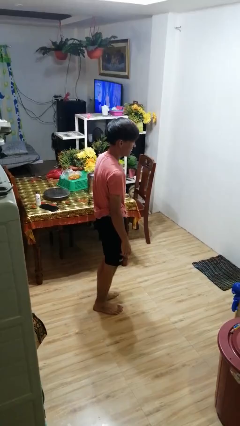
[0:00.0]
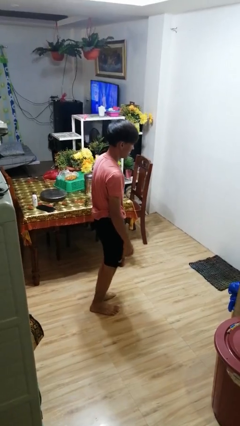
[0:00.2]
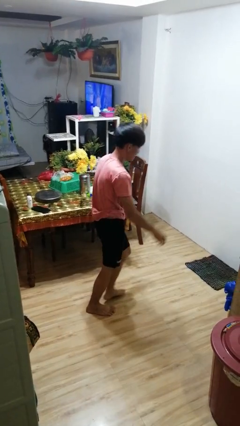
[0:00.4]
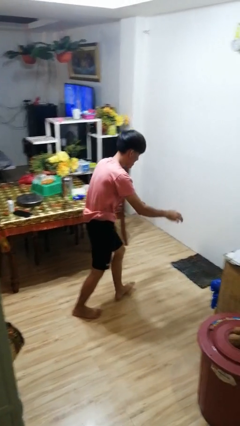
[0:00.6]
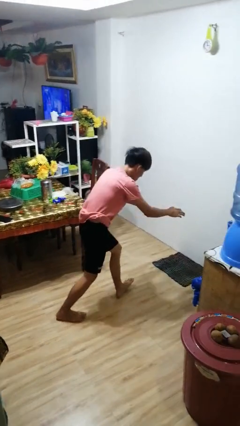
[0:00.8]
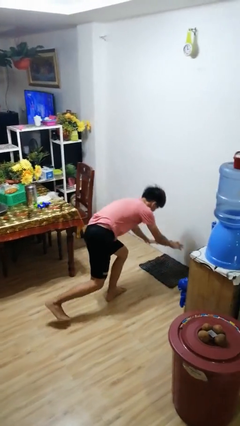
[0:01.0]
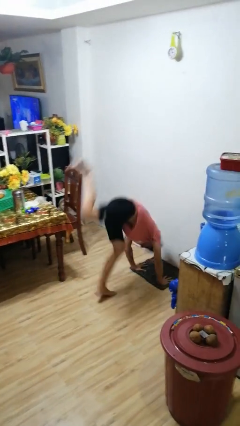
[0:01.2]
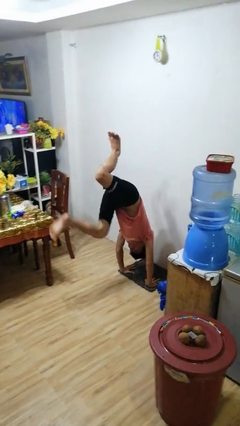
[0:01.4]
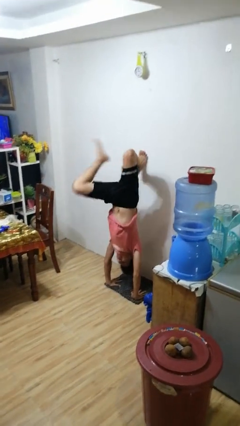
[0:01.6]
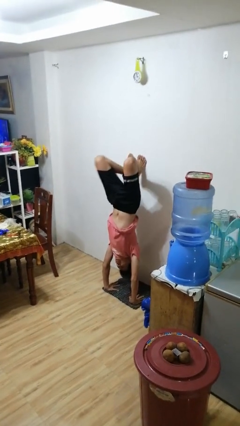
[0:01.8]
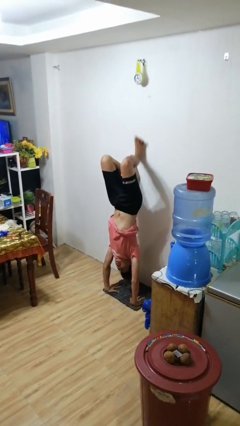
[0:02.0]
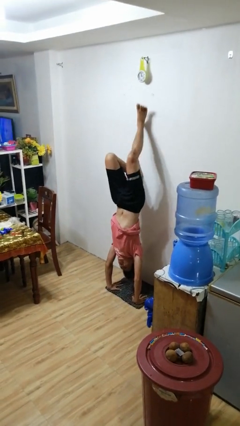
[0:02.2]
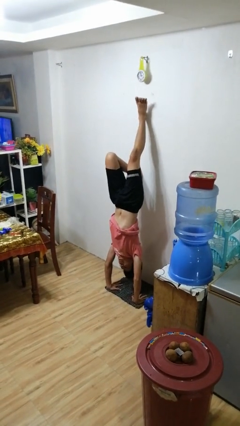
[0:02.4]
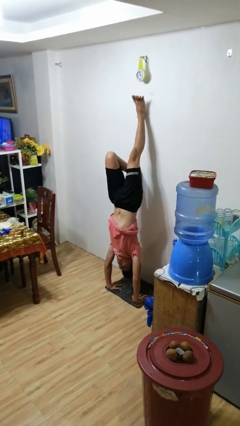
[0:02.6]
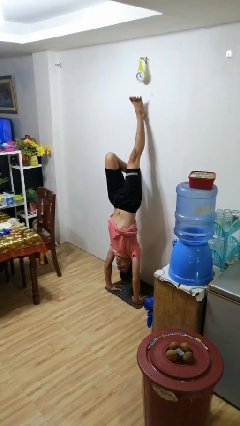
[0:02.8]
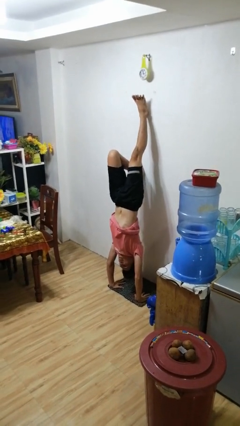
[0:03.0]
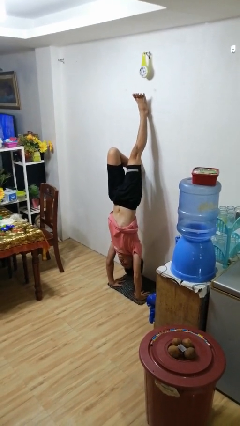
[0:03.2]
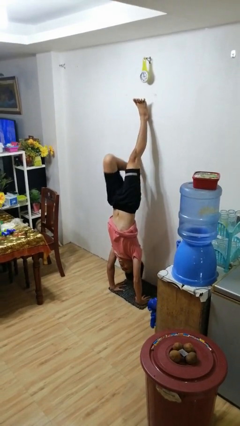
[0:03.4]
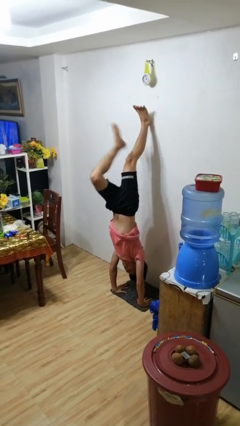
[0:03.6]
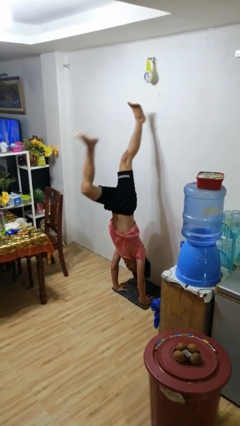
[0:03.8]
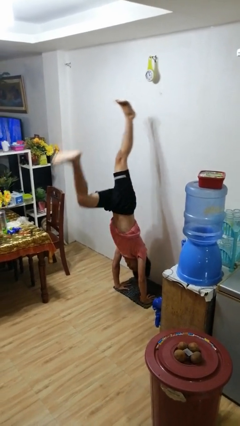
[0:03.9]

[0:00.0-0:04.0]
person handstand

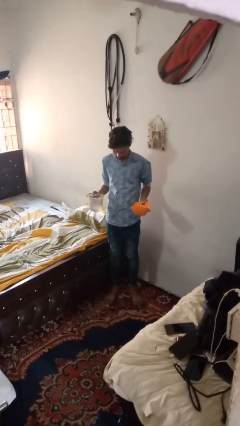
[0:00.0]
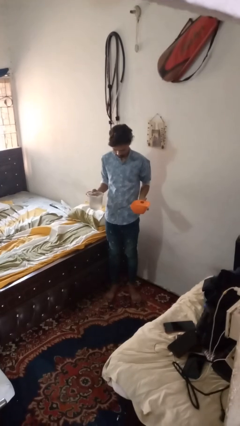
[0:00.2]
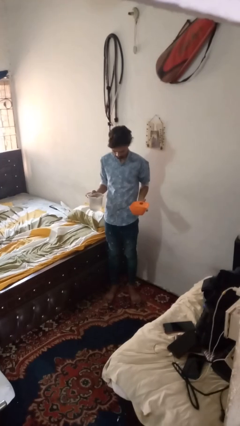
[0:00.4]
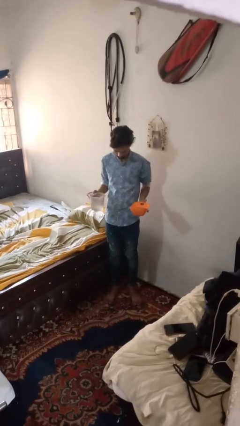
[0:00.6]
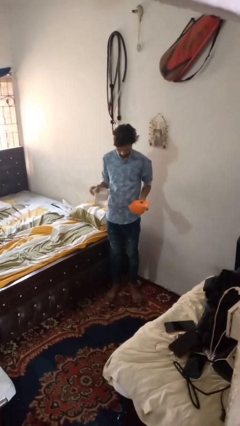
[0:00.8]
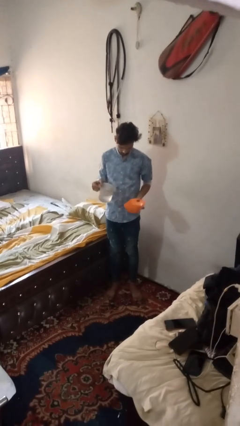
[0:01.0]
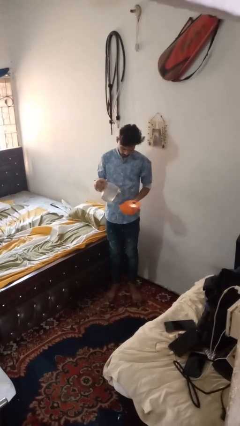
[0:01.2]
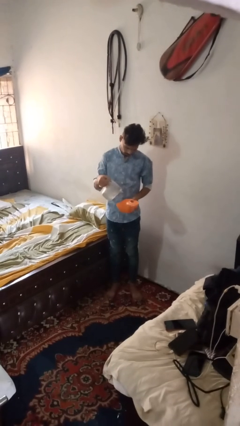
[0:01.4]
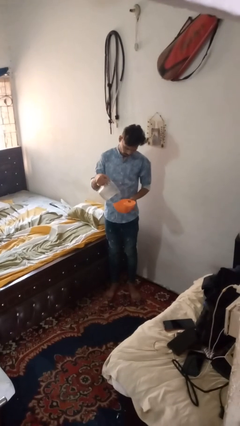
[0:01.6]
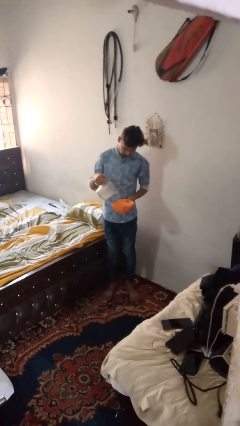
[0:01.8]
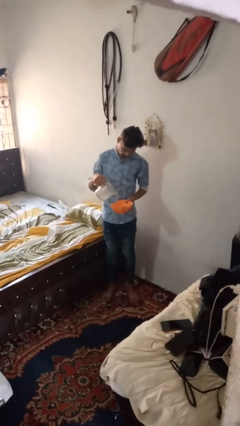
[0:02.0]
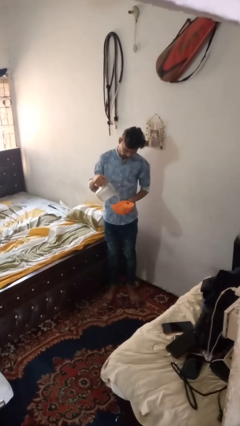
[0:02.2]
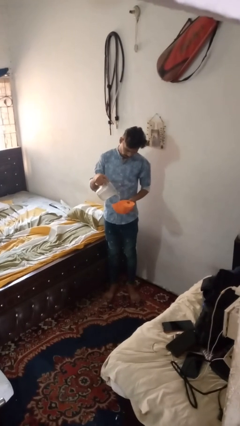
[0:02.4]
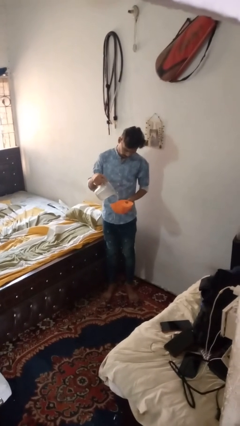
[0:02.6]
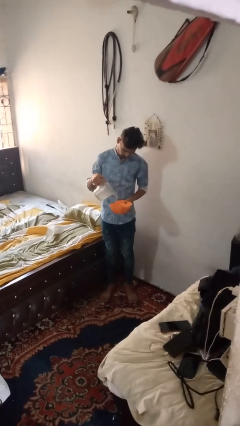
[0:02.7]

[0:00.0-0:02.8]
person pours into bowl

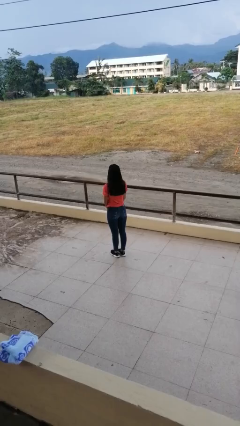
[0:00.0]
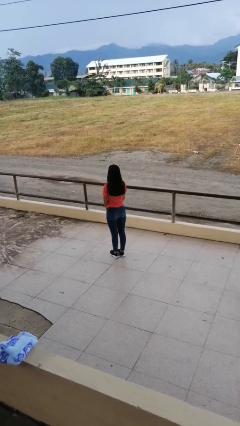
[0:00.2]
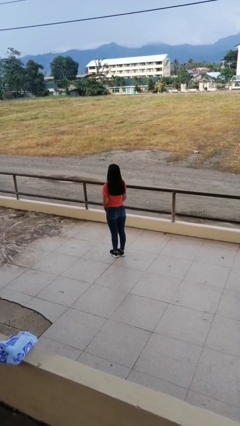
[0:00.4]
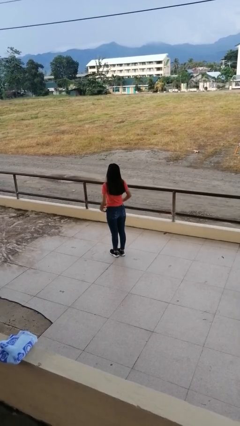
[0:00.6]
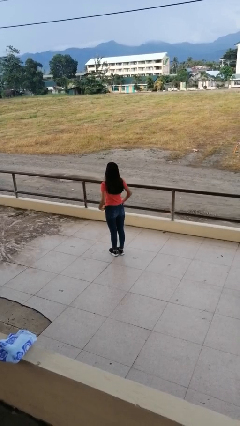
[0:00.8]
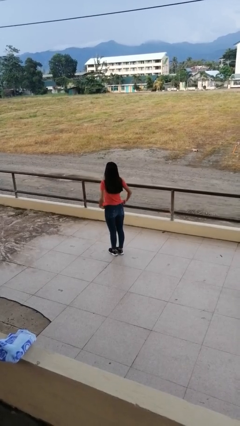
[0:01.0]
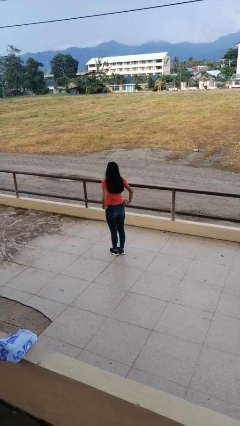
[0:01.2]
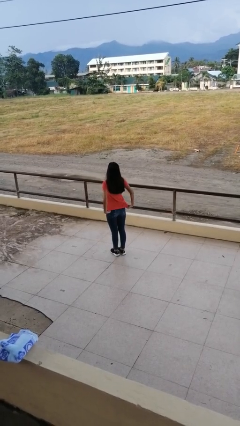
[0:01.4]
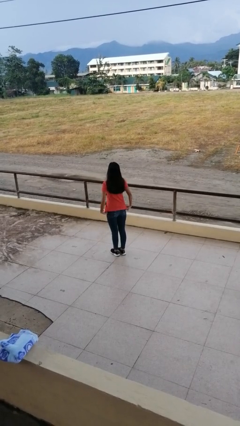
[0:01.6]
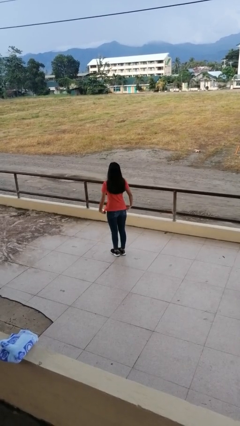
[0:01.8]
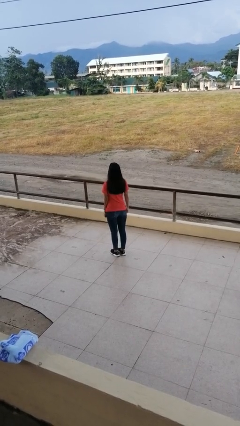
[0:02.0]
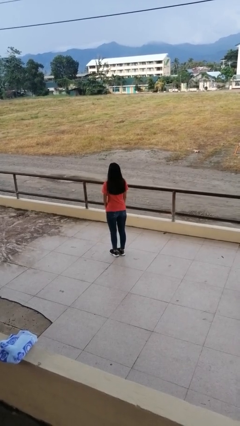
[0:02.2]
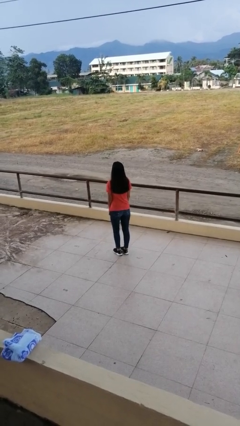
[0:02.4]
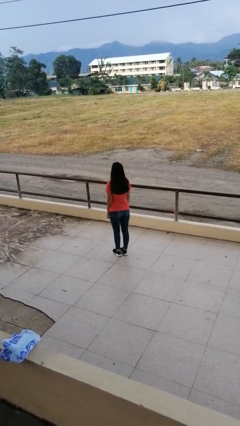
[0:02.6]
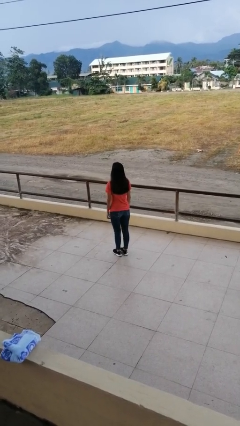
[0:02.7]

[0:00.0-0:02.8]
person untucks shirt

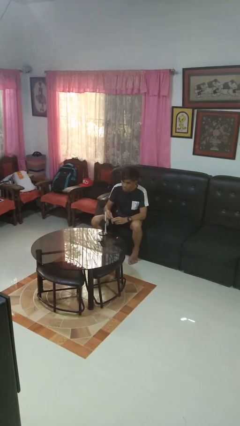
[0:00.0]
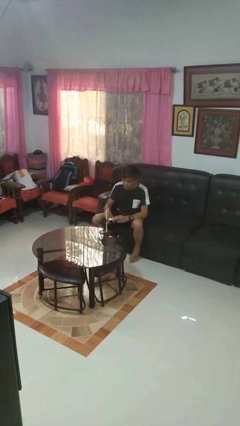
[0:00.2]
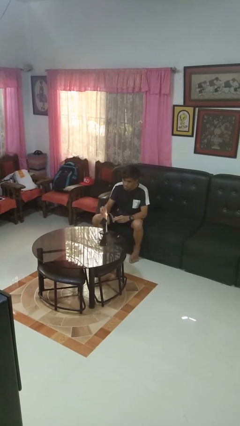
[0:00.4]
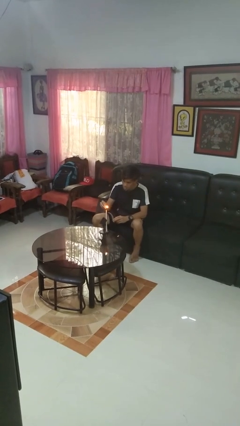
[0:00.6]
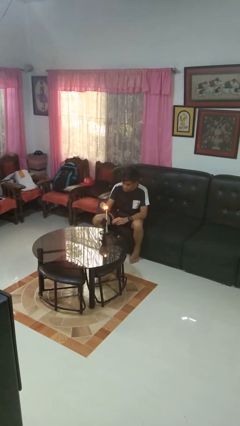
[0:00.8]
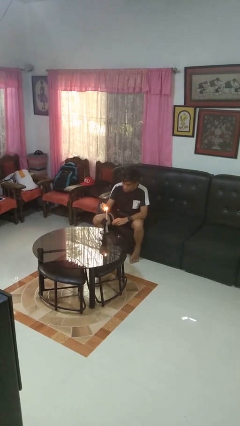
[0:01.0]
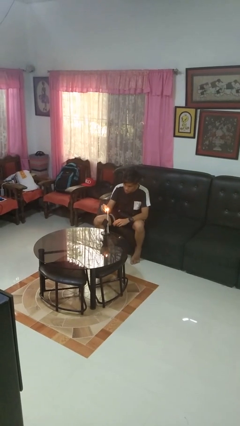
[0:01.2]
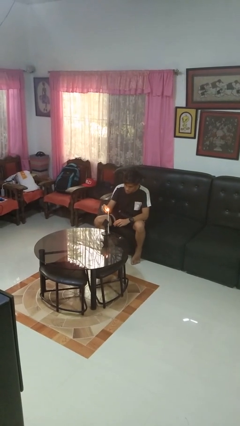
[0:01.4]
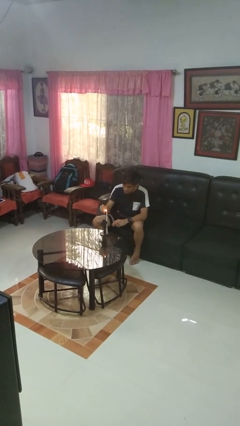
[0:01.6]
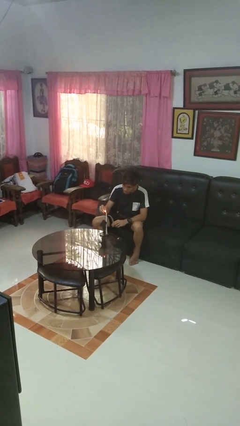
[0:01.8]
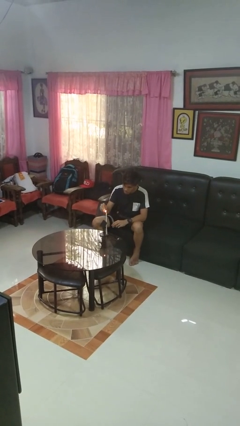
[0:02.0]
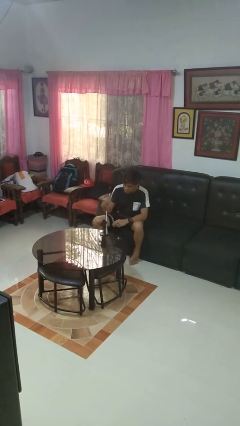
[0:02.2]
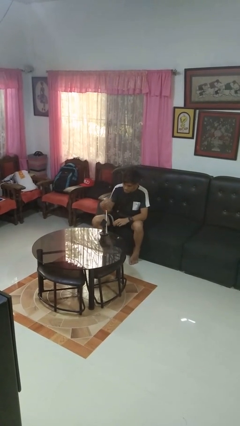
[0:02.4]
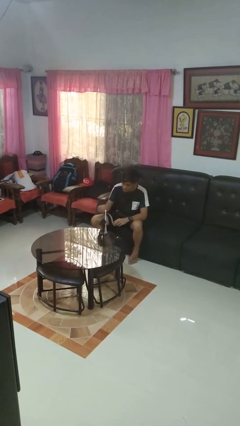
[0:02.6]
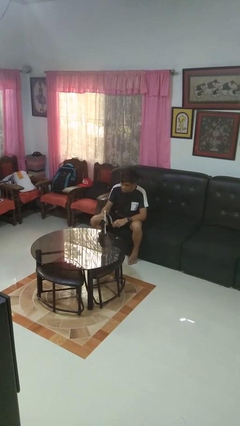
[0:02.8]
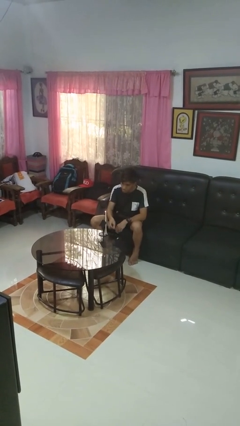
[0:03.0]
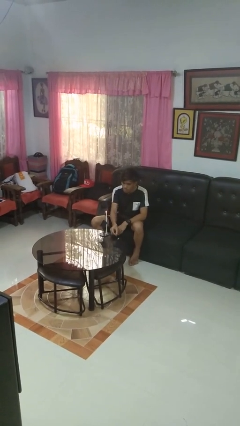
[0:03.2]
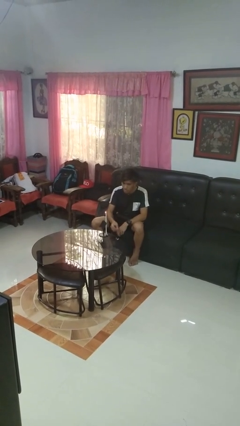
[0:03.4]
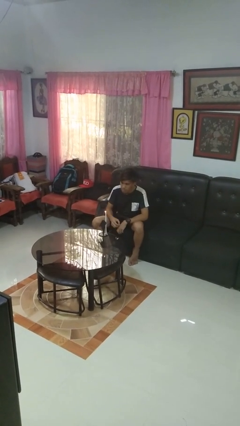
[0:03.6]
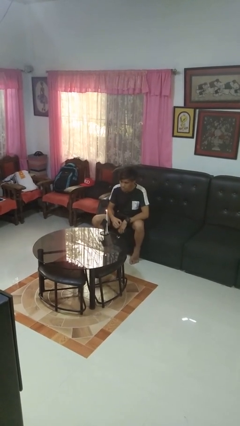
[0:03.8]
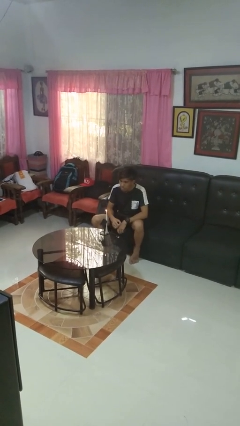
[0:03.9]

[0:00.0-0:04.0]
person lights candle

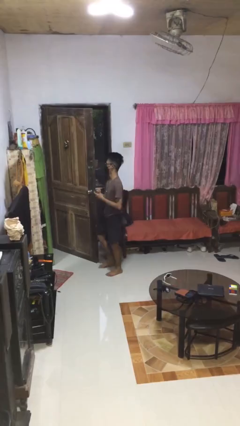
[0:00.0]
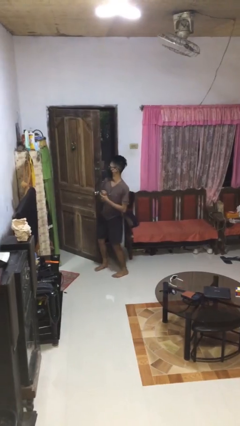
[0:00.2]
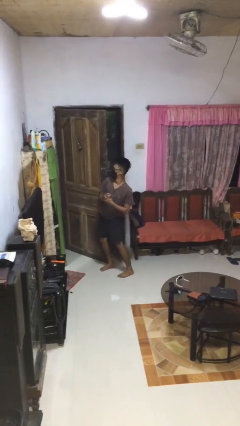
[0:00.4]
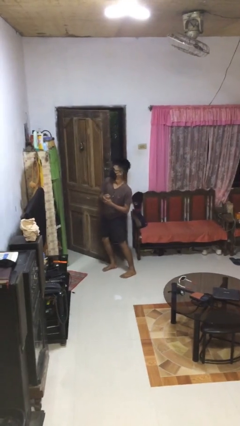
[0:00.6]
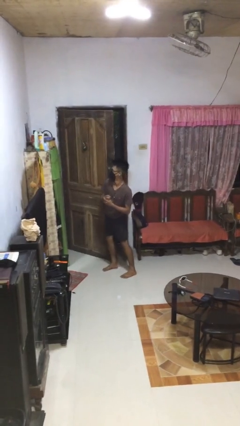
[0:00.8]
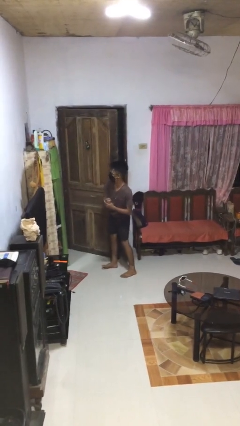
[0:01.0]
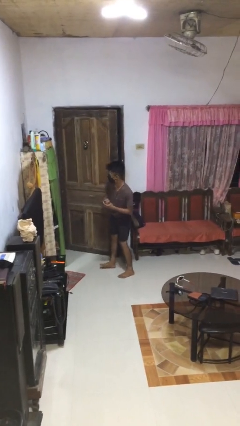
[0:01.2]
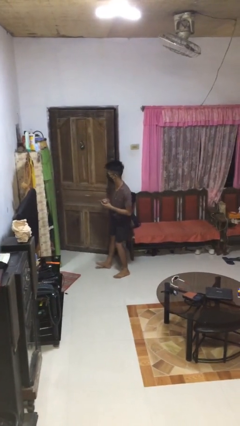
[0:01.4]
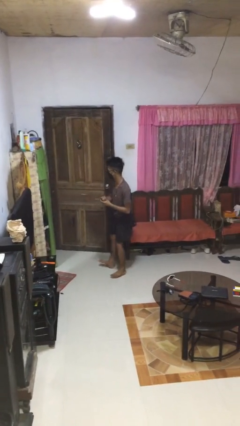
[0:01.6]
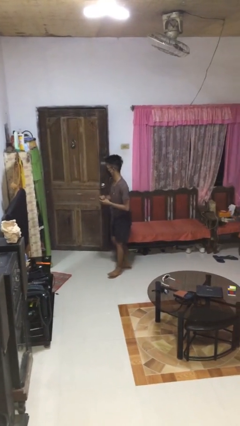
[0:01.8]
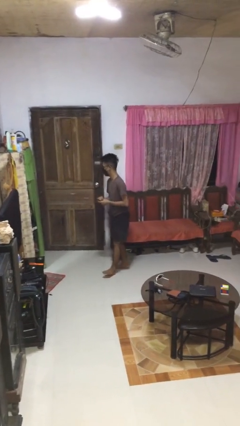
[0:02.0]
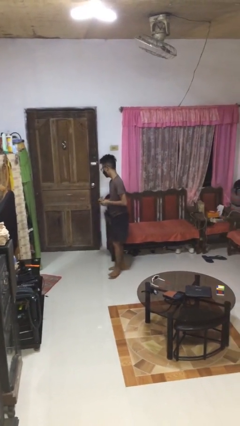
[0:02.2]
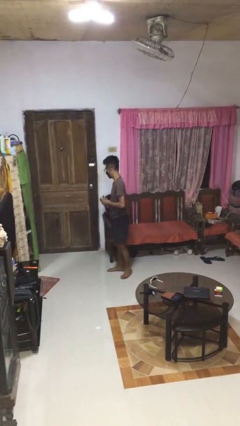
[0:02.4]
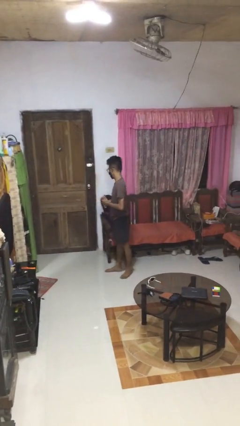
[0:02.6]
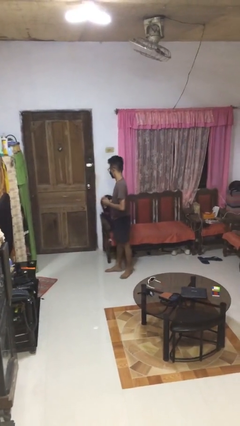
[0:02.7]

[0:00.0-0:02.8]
person closes door with hip

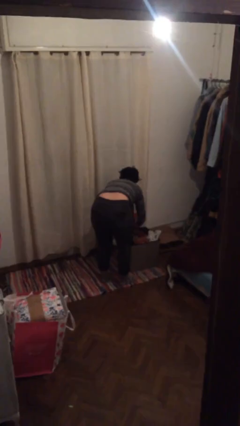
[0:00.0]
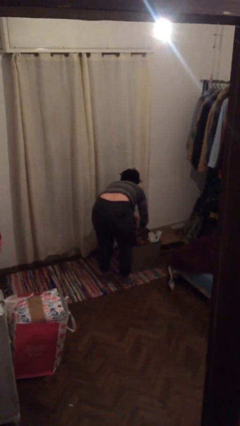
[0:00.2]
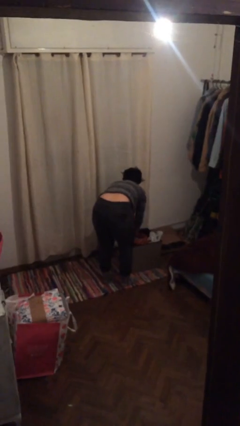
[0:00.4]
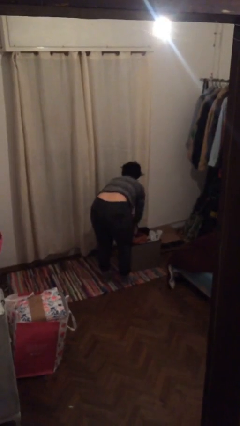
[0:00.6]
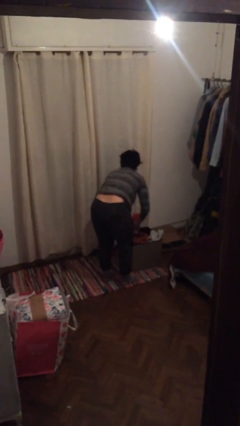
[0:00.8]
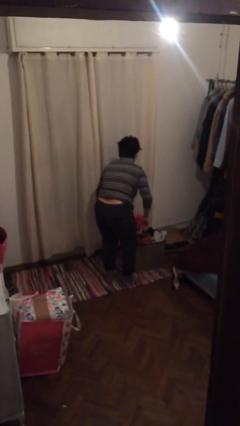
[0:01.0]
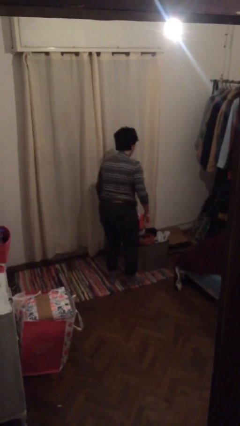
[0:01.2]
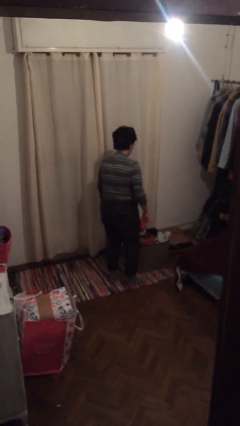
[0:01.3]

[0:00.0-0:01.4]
person puts object into basket
